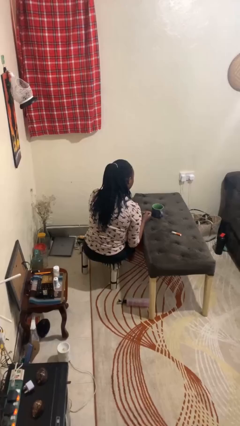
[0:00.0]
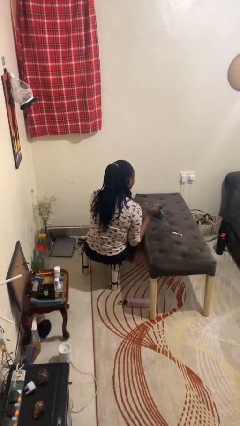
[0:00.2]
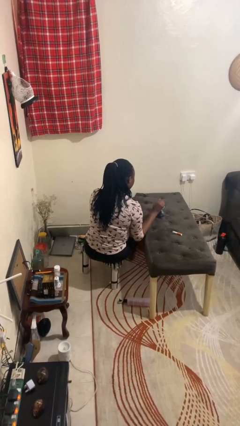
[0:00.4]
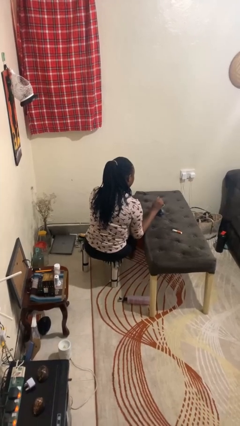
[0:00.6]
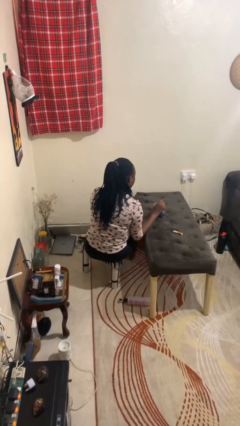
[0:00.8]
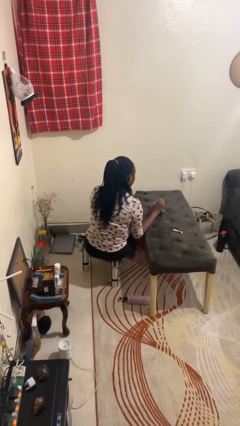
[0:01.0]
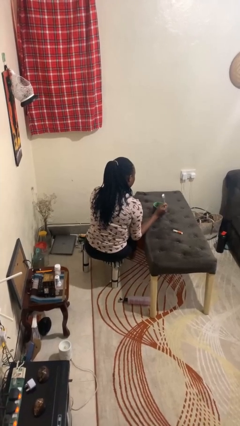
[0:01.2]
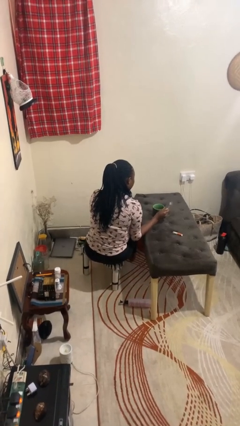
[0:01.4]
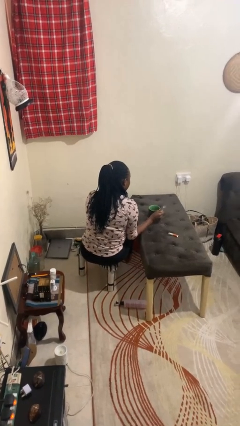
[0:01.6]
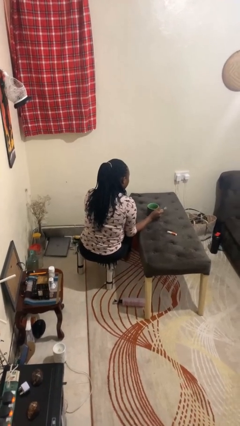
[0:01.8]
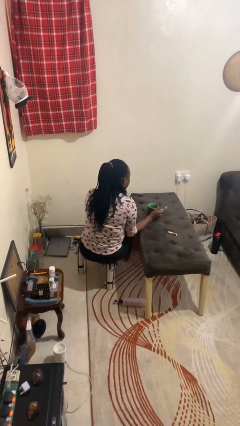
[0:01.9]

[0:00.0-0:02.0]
person stirs mug

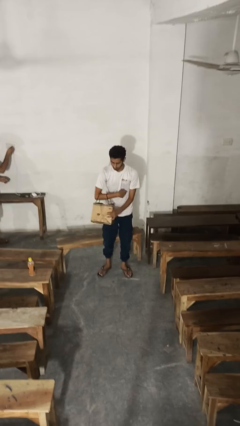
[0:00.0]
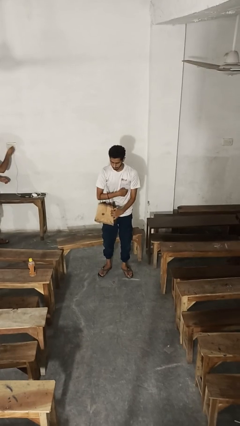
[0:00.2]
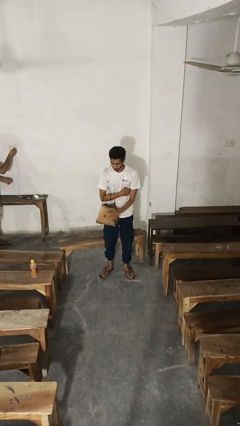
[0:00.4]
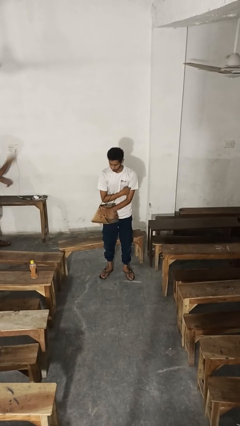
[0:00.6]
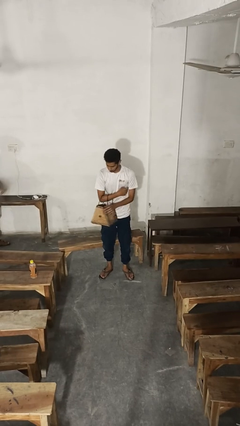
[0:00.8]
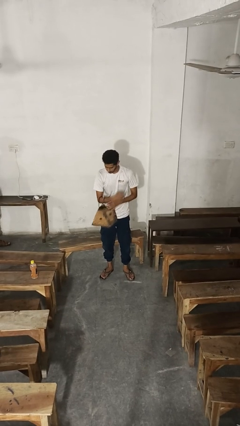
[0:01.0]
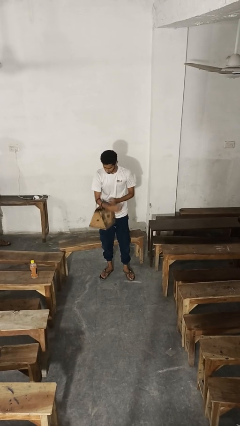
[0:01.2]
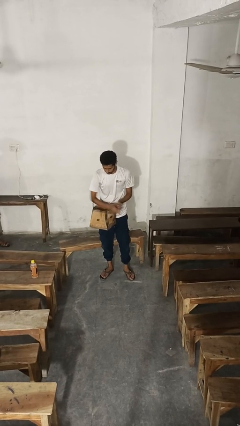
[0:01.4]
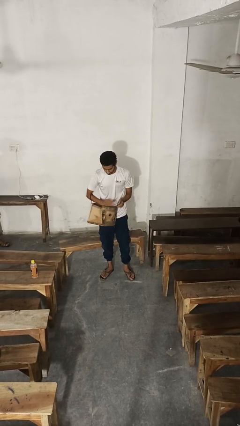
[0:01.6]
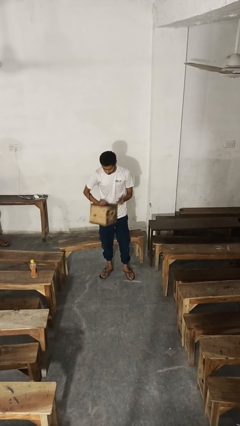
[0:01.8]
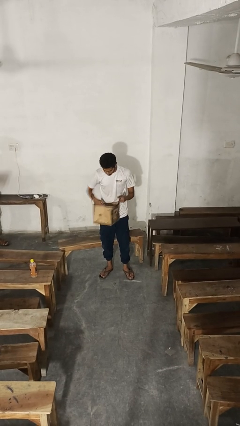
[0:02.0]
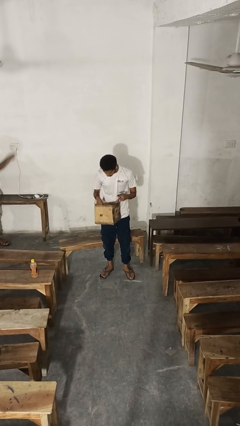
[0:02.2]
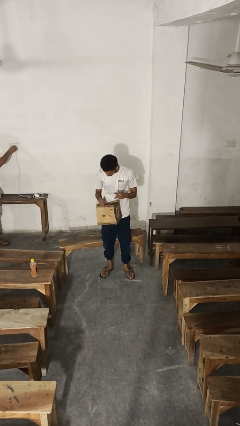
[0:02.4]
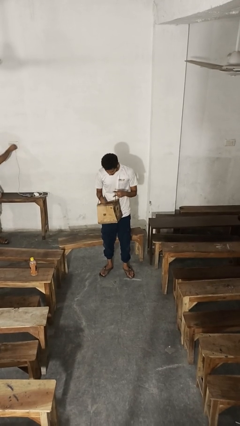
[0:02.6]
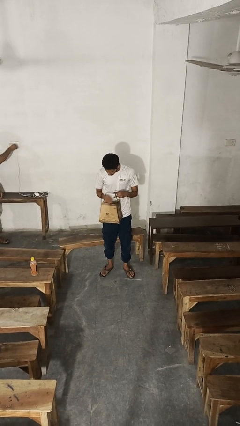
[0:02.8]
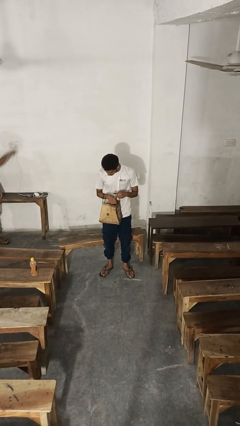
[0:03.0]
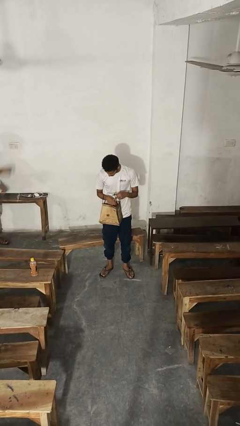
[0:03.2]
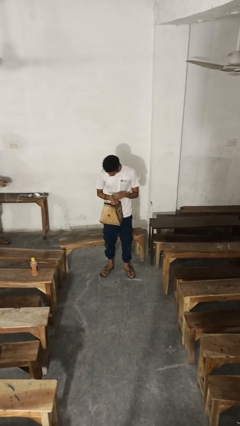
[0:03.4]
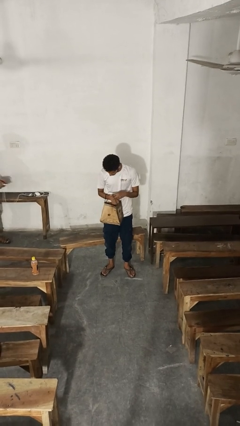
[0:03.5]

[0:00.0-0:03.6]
person searches in purse

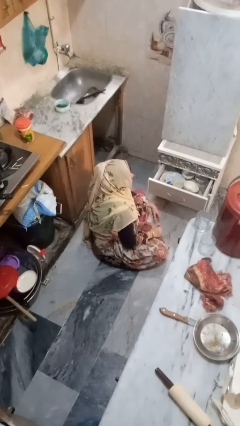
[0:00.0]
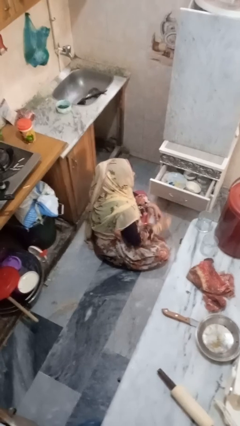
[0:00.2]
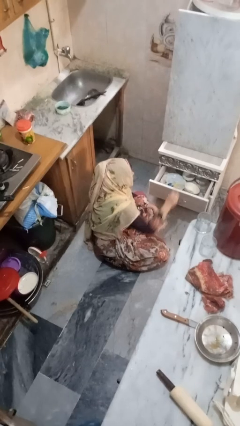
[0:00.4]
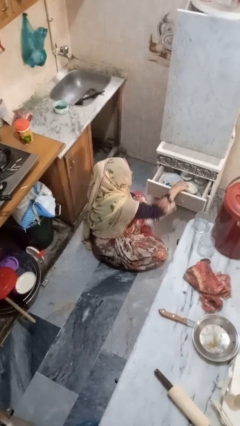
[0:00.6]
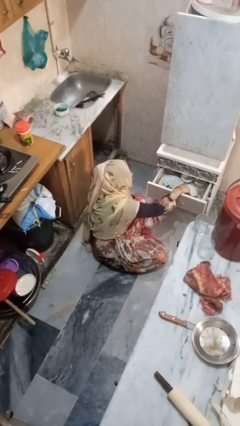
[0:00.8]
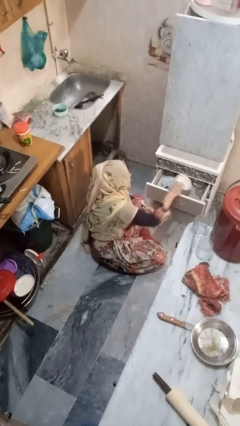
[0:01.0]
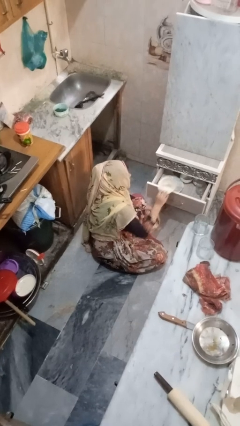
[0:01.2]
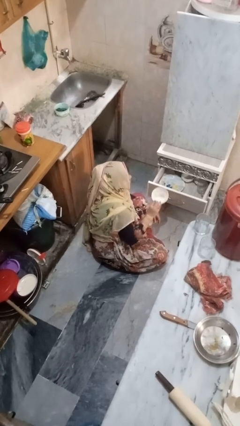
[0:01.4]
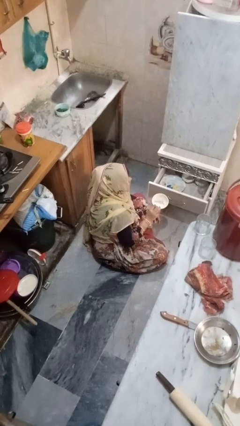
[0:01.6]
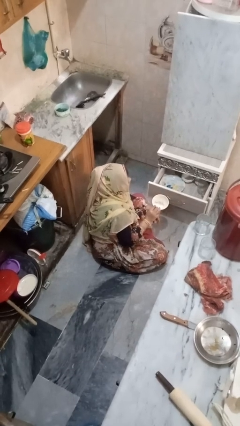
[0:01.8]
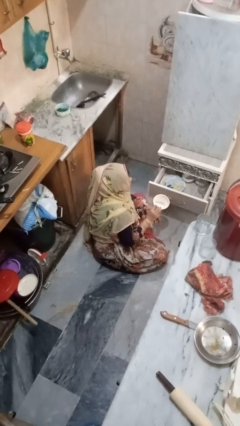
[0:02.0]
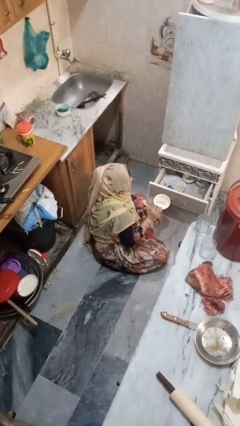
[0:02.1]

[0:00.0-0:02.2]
person takes object from kitchen drawer

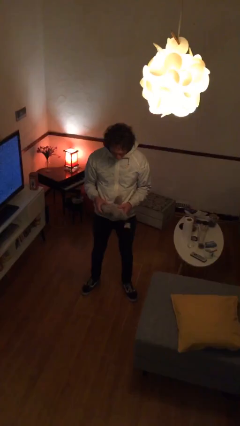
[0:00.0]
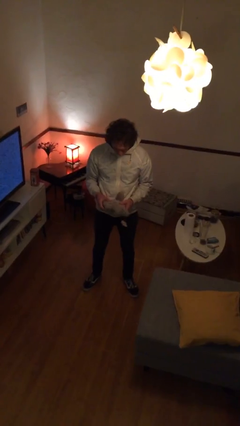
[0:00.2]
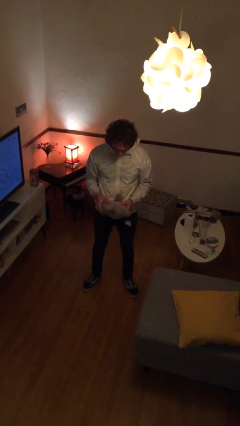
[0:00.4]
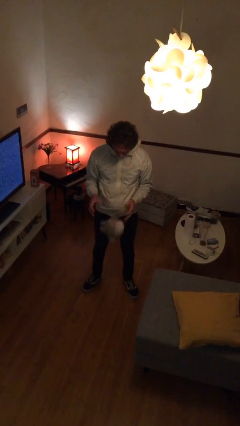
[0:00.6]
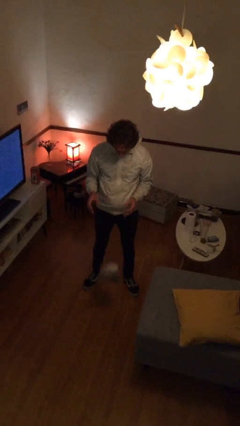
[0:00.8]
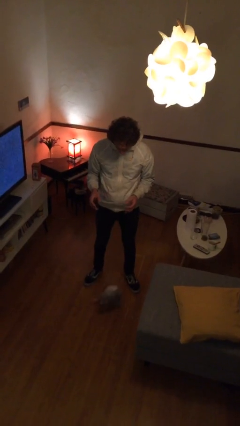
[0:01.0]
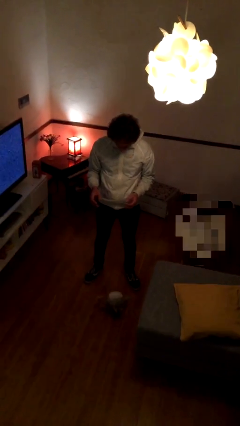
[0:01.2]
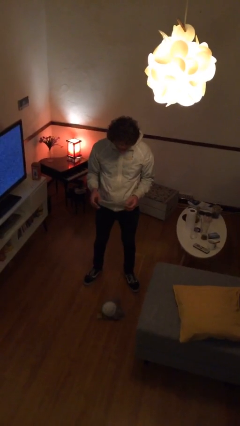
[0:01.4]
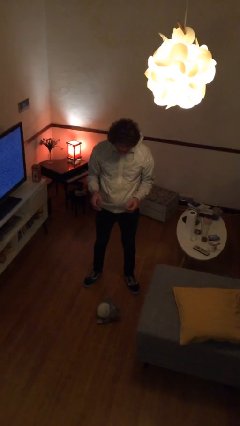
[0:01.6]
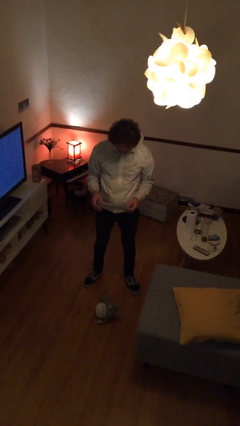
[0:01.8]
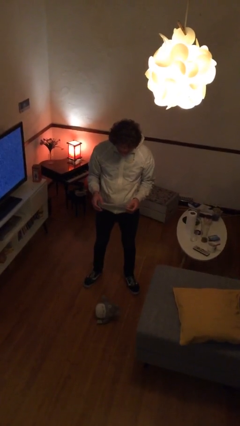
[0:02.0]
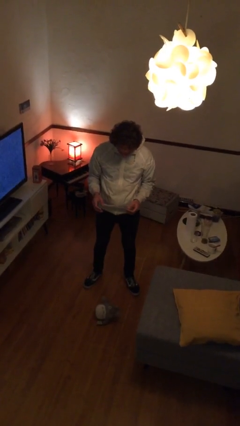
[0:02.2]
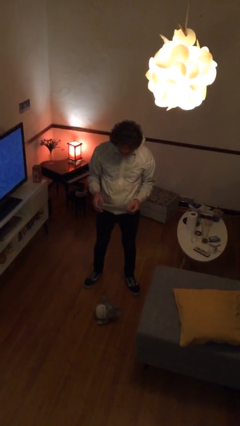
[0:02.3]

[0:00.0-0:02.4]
person drops object

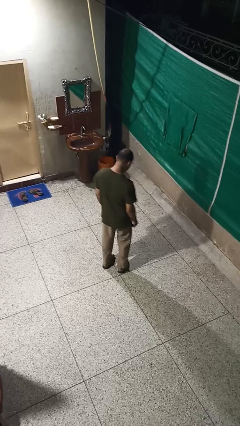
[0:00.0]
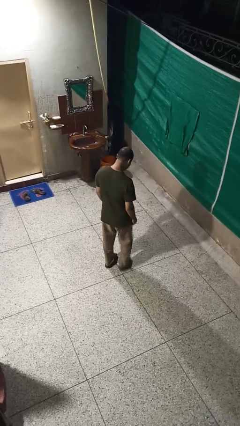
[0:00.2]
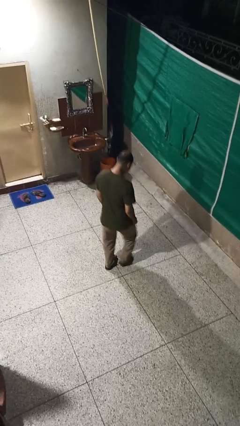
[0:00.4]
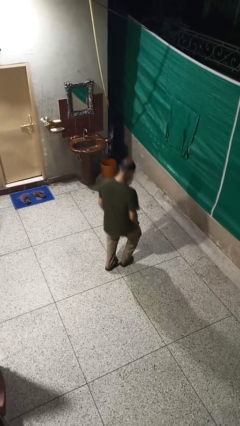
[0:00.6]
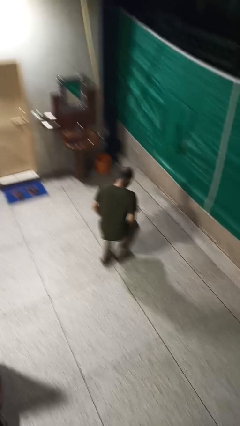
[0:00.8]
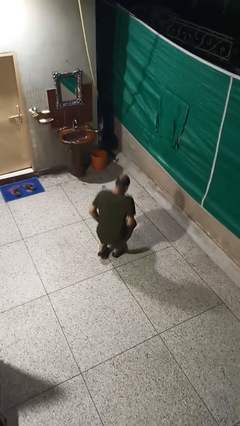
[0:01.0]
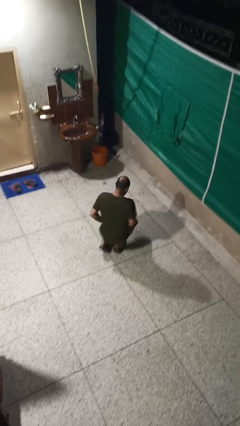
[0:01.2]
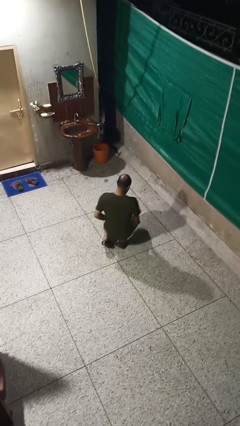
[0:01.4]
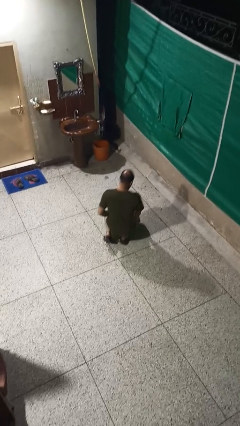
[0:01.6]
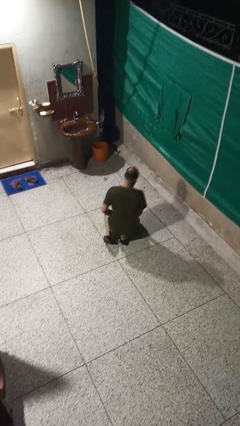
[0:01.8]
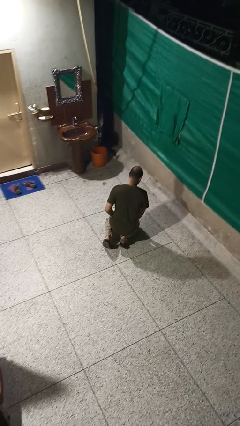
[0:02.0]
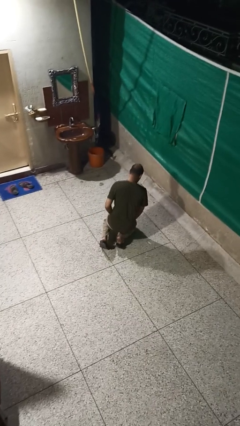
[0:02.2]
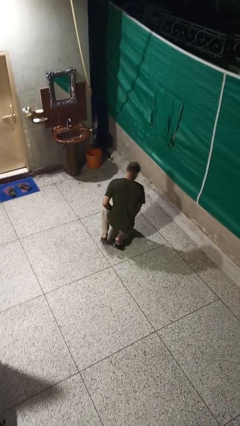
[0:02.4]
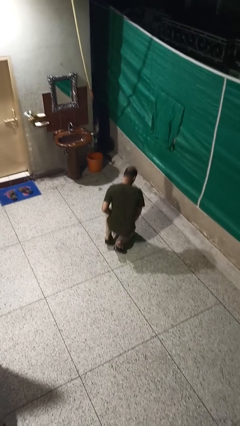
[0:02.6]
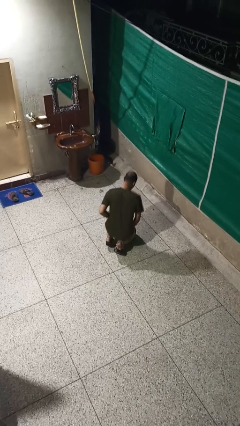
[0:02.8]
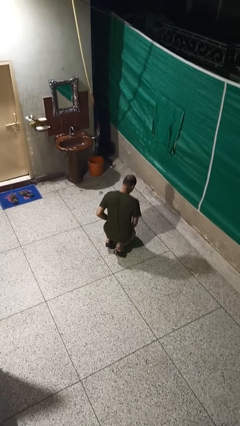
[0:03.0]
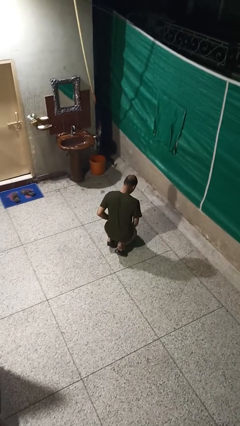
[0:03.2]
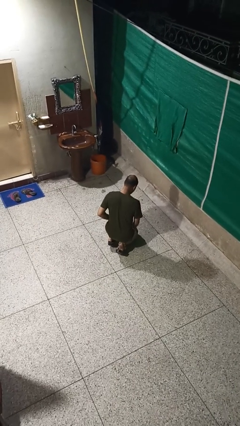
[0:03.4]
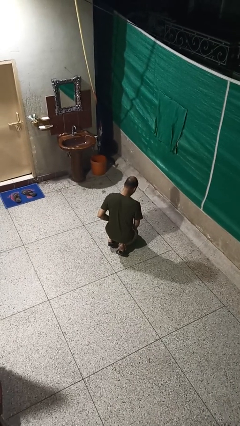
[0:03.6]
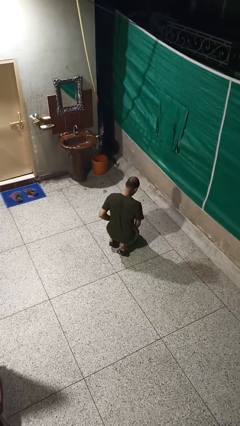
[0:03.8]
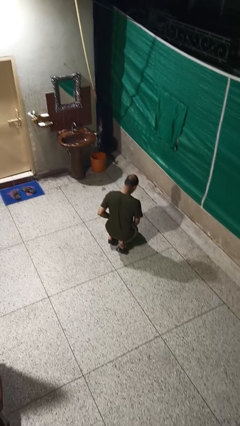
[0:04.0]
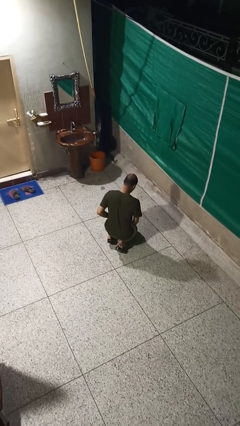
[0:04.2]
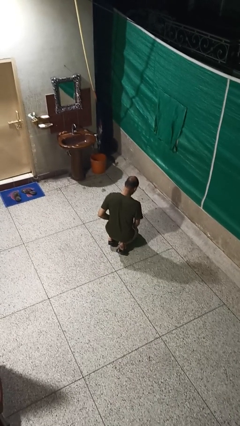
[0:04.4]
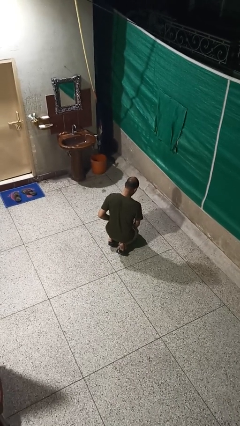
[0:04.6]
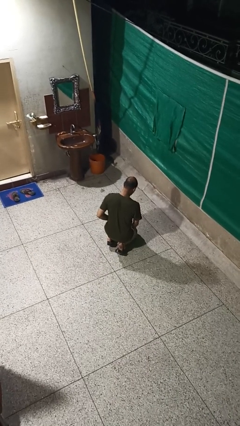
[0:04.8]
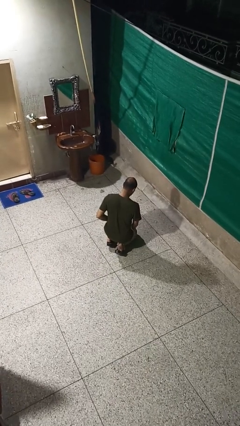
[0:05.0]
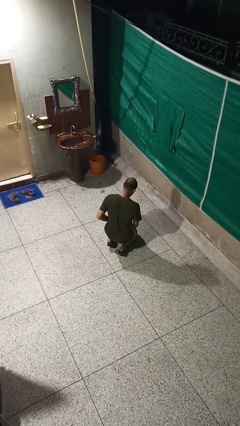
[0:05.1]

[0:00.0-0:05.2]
person kneels

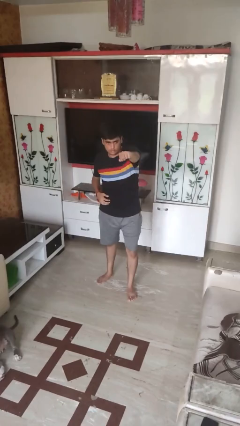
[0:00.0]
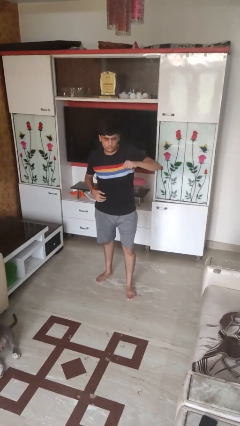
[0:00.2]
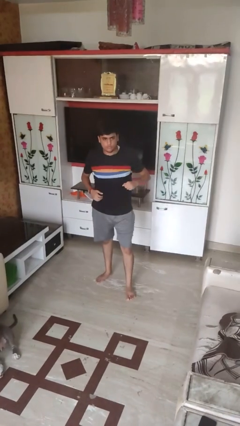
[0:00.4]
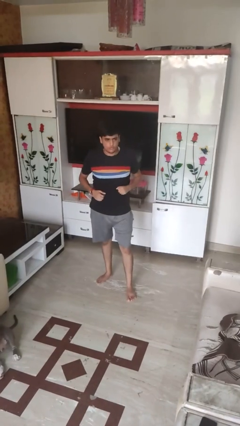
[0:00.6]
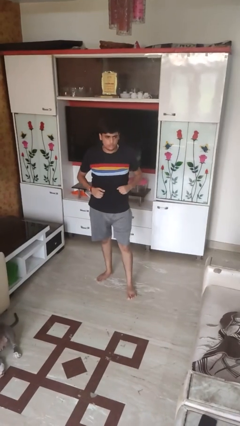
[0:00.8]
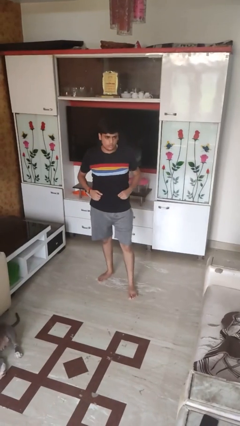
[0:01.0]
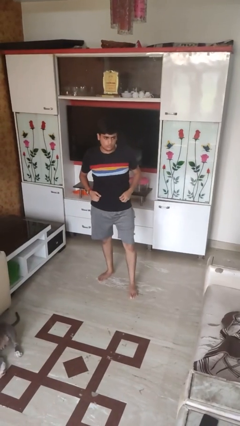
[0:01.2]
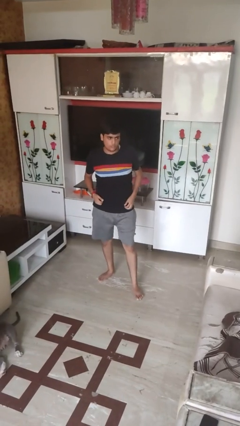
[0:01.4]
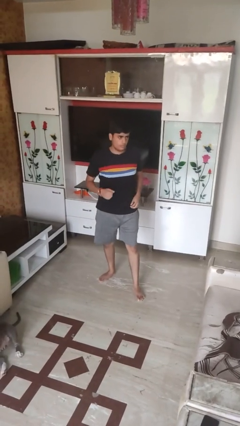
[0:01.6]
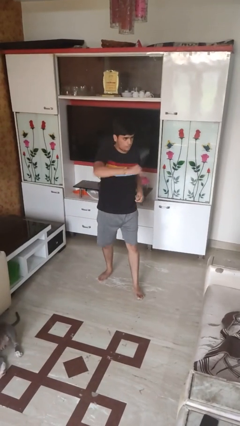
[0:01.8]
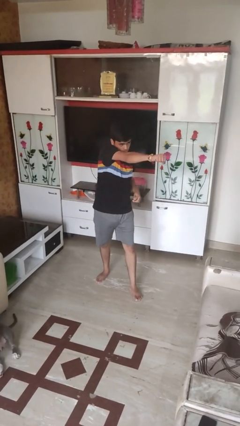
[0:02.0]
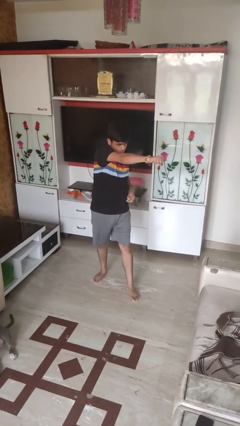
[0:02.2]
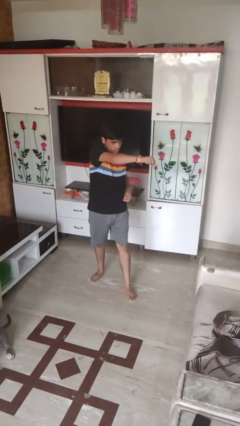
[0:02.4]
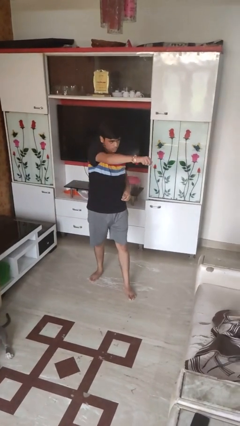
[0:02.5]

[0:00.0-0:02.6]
person punches
